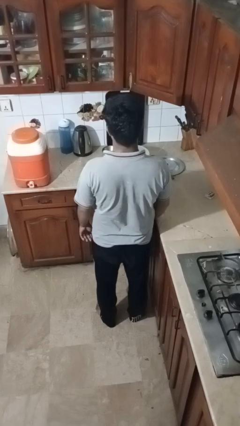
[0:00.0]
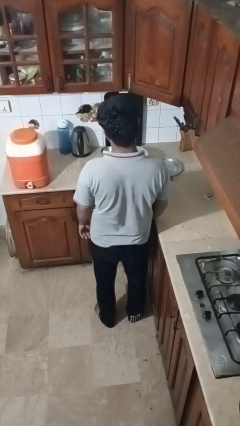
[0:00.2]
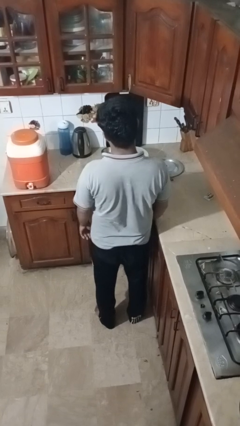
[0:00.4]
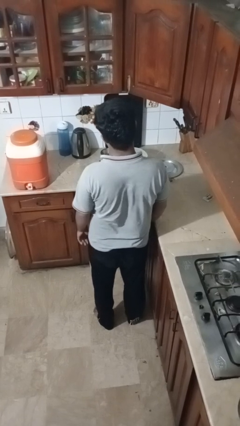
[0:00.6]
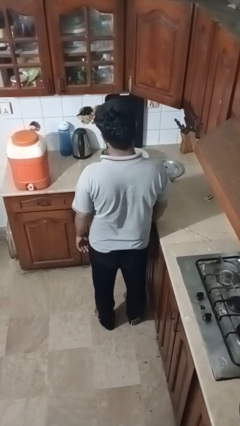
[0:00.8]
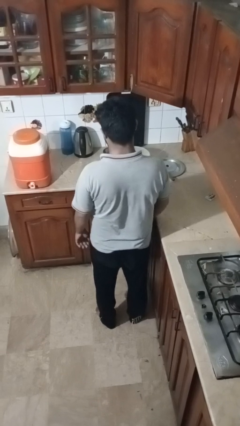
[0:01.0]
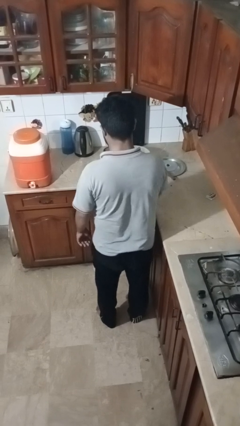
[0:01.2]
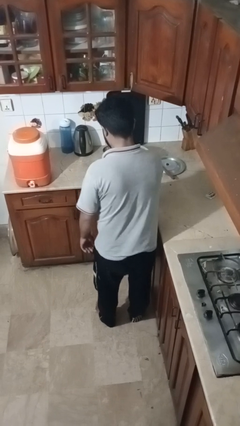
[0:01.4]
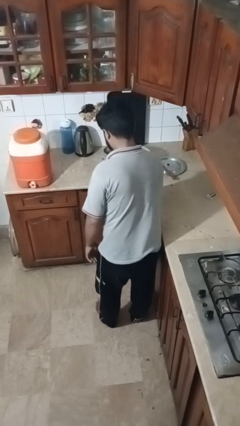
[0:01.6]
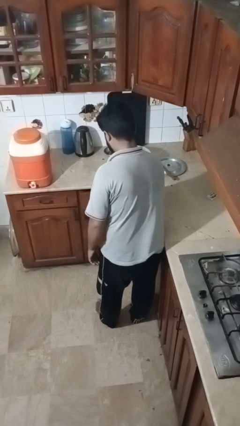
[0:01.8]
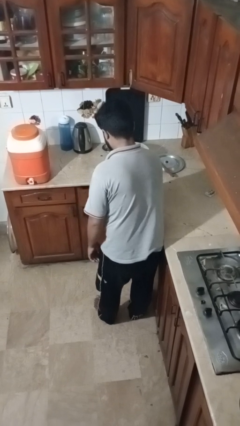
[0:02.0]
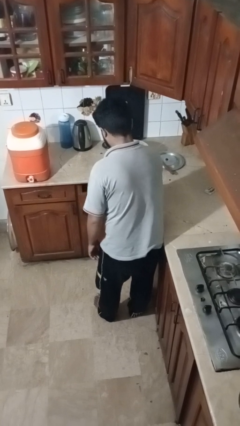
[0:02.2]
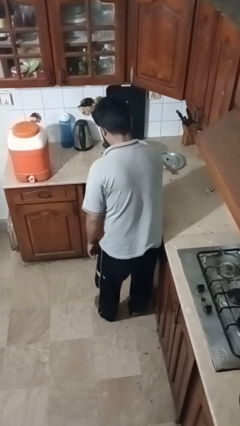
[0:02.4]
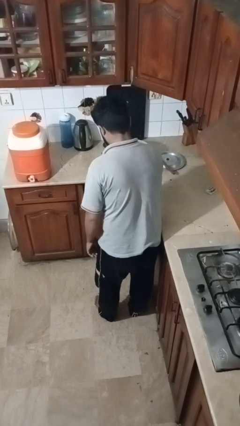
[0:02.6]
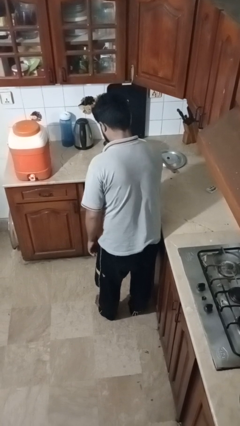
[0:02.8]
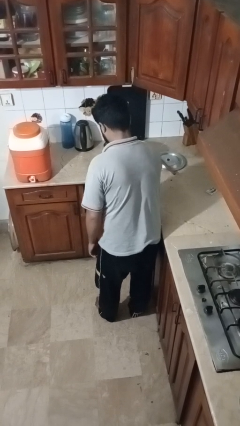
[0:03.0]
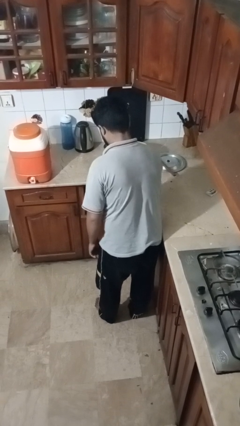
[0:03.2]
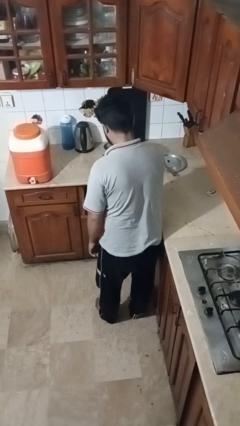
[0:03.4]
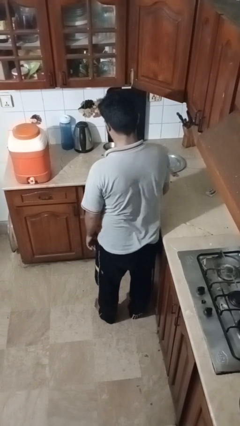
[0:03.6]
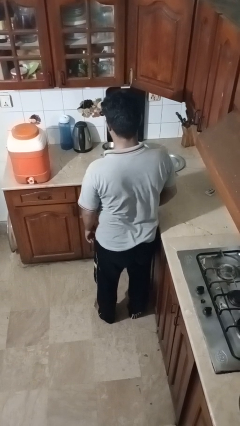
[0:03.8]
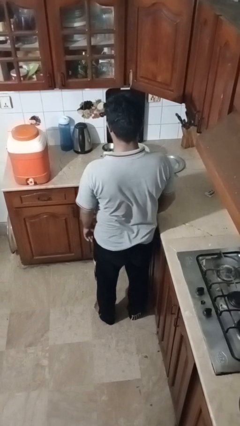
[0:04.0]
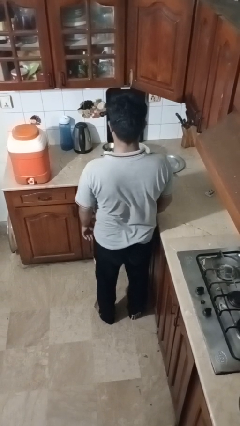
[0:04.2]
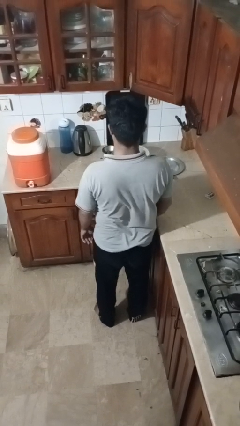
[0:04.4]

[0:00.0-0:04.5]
person opens kitchen drawer

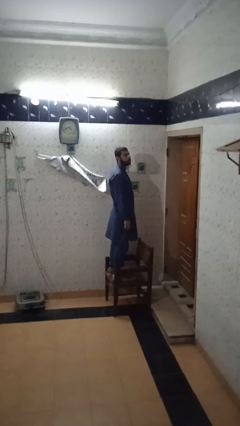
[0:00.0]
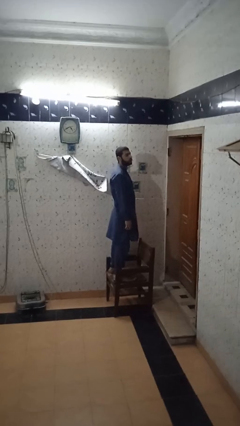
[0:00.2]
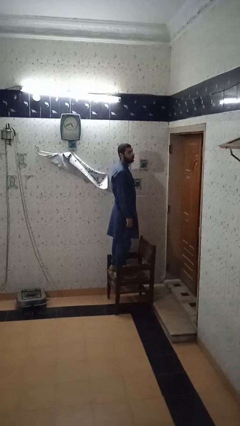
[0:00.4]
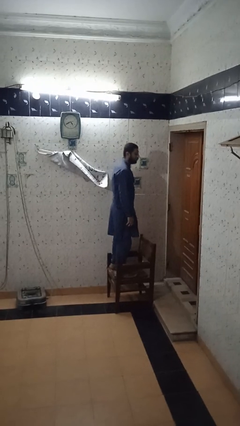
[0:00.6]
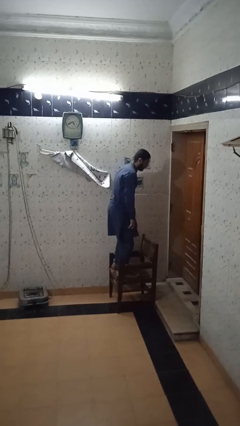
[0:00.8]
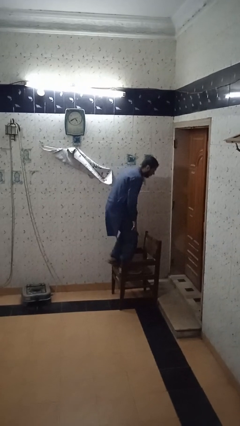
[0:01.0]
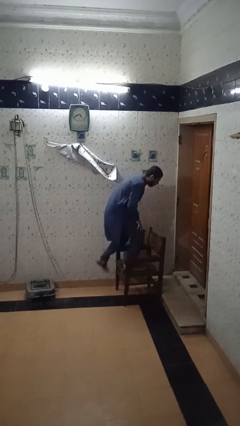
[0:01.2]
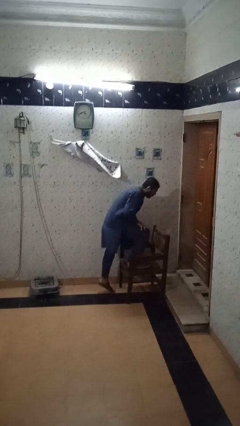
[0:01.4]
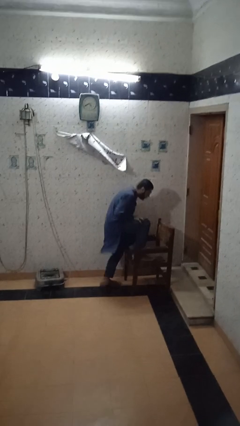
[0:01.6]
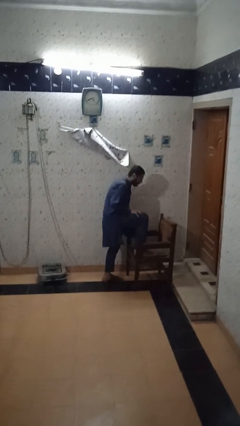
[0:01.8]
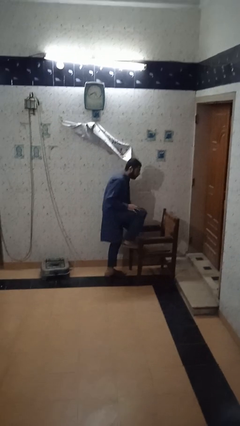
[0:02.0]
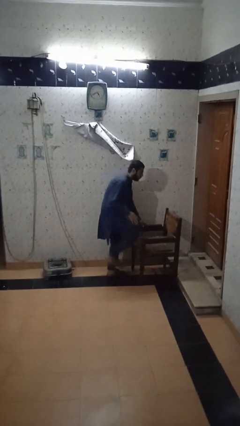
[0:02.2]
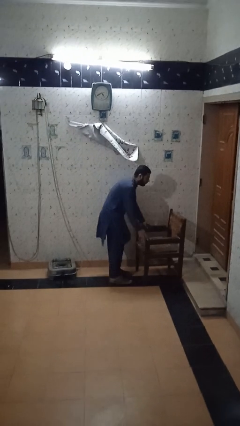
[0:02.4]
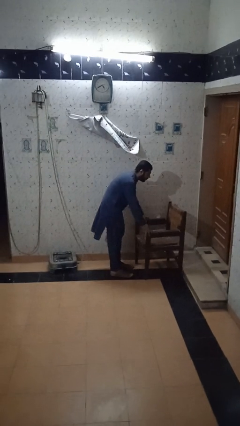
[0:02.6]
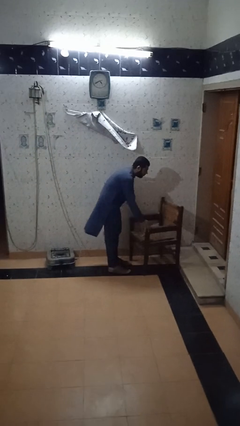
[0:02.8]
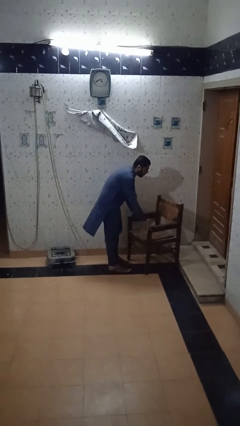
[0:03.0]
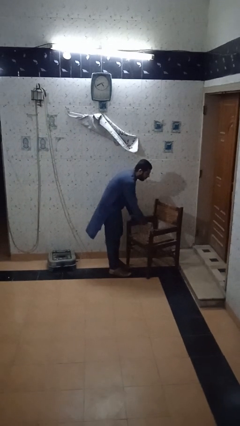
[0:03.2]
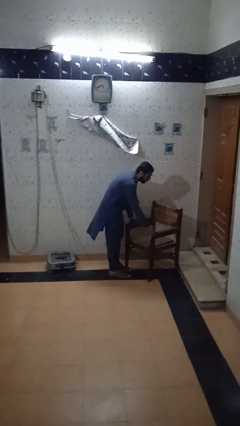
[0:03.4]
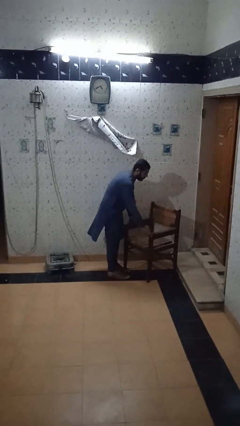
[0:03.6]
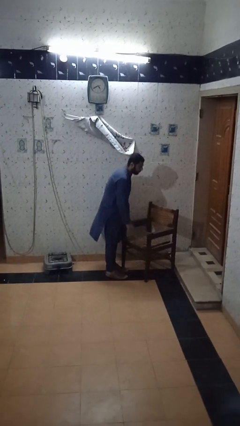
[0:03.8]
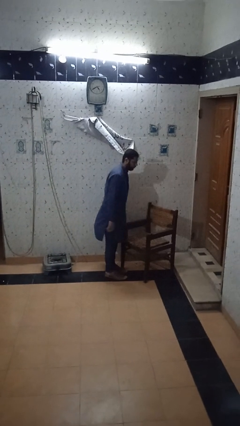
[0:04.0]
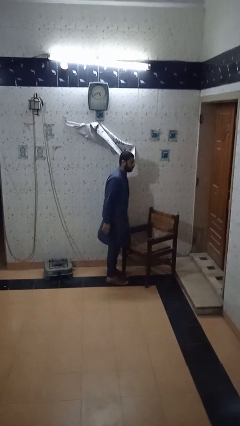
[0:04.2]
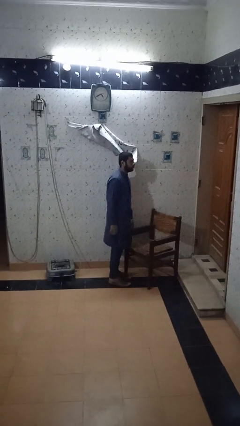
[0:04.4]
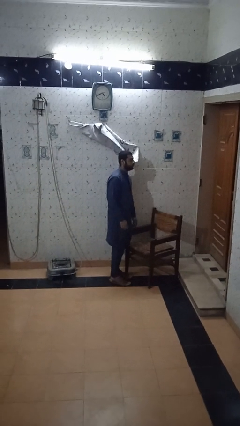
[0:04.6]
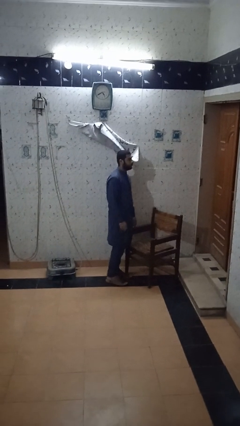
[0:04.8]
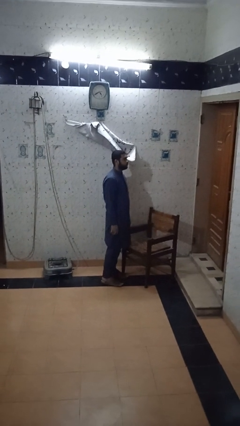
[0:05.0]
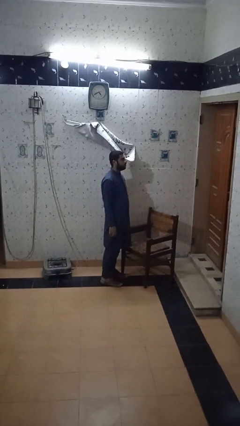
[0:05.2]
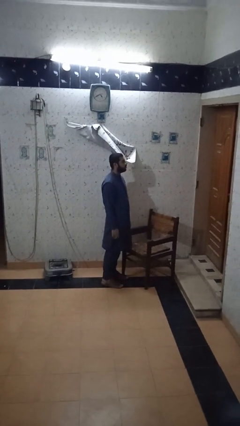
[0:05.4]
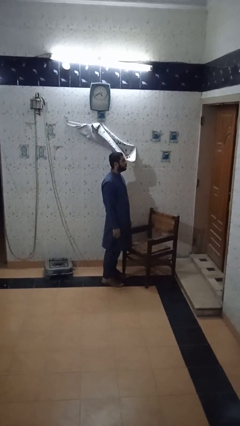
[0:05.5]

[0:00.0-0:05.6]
person climbs off chair

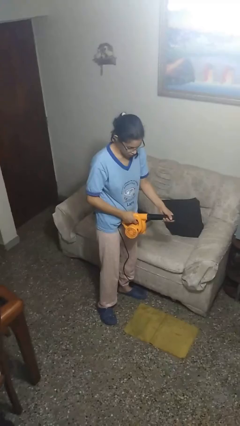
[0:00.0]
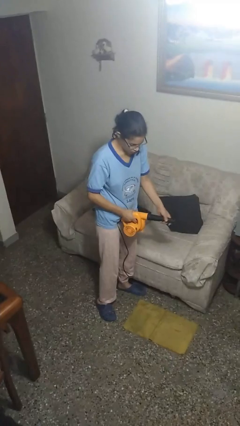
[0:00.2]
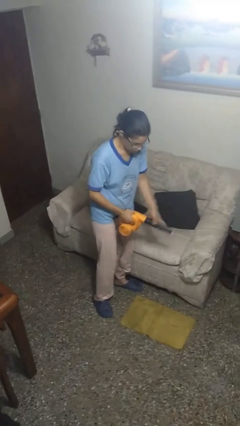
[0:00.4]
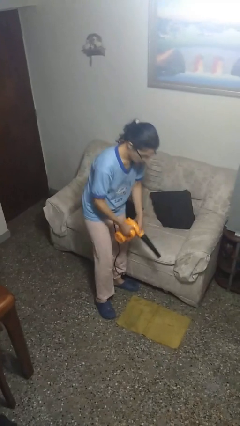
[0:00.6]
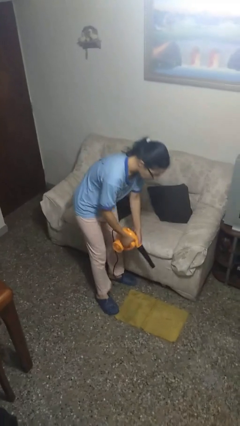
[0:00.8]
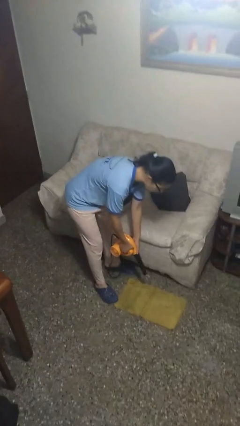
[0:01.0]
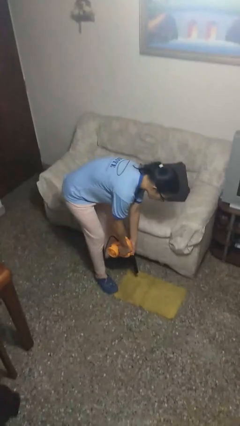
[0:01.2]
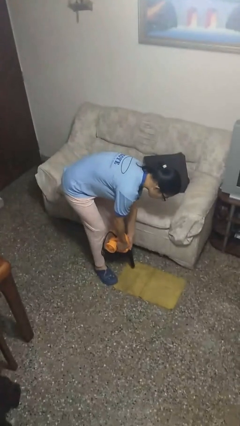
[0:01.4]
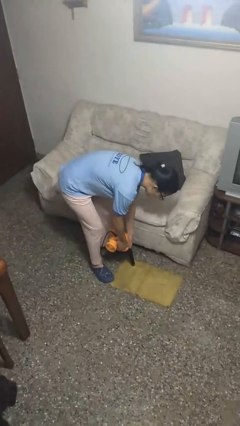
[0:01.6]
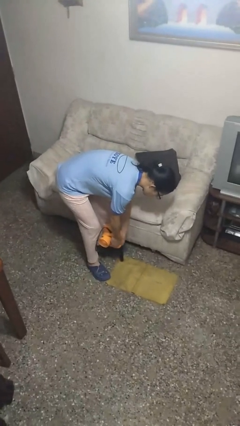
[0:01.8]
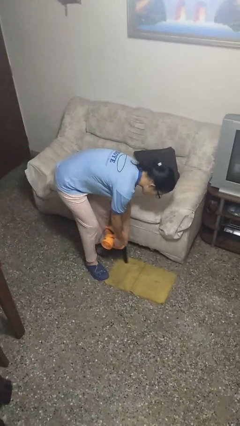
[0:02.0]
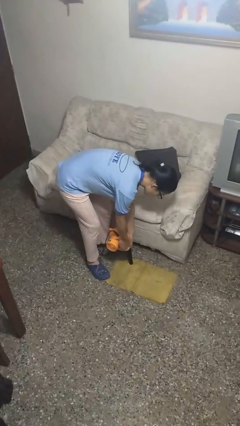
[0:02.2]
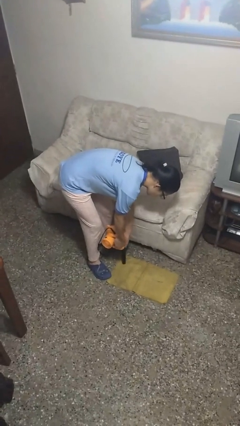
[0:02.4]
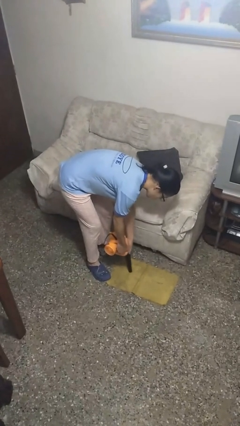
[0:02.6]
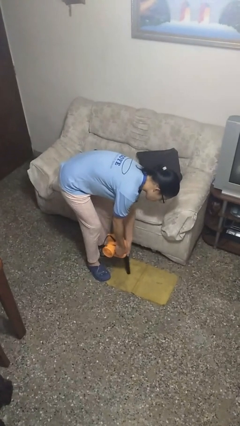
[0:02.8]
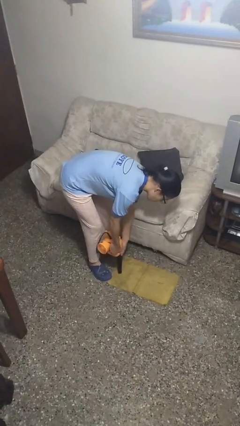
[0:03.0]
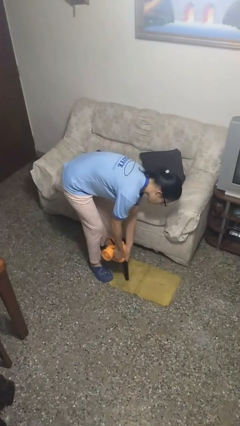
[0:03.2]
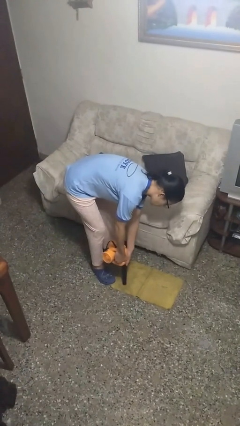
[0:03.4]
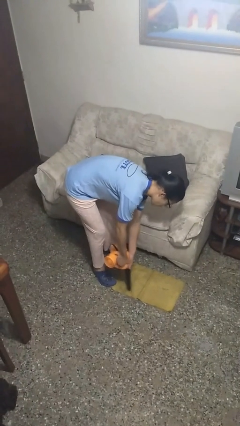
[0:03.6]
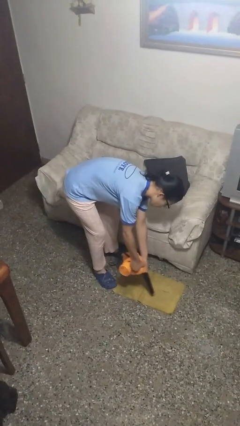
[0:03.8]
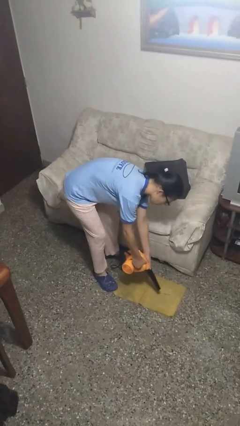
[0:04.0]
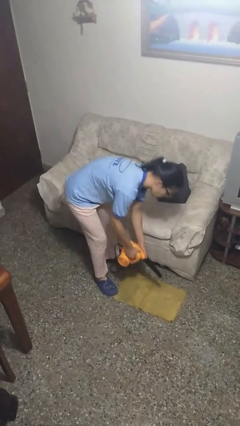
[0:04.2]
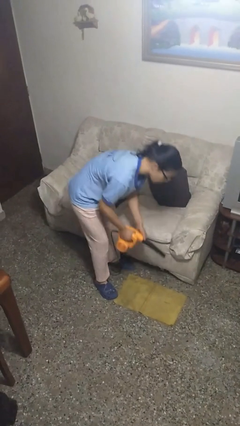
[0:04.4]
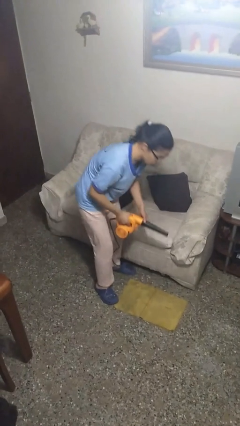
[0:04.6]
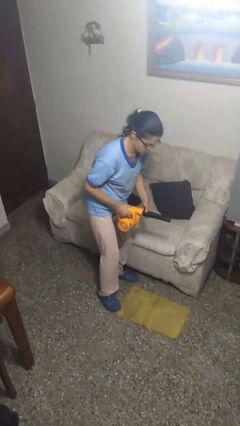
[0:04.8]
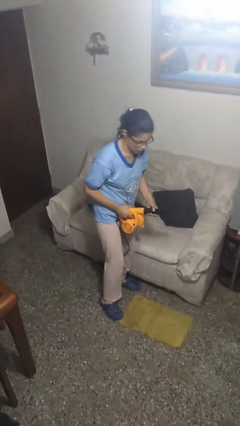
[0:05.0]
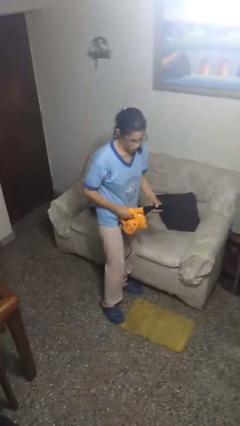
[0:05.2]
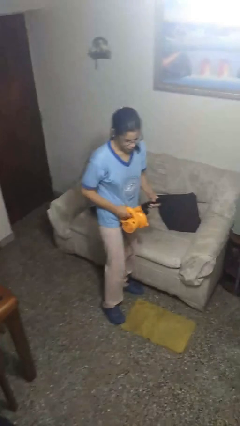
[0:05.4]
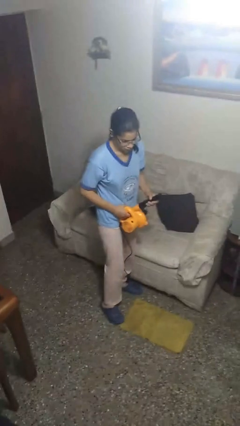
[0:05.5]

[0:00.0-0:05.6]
person vacuums carpet

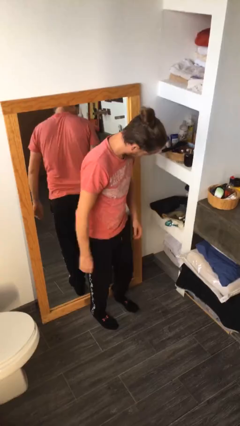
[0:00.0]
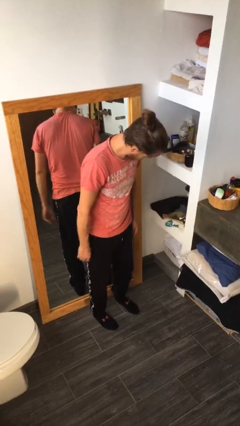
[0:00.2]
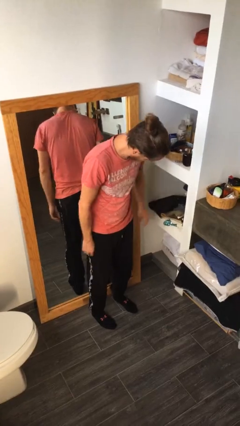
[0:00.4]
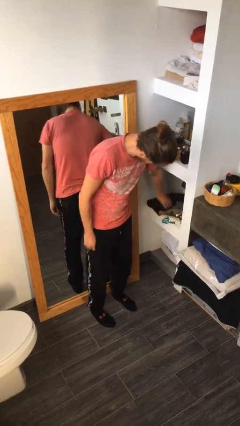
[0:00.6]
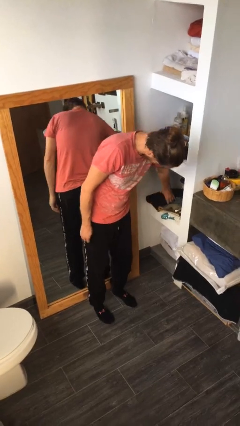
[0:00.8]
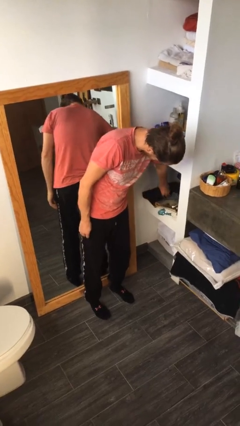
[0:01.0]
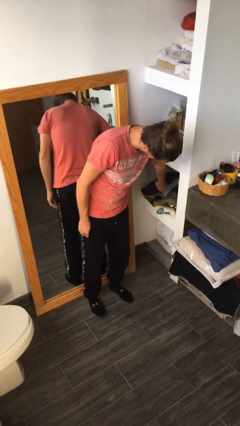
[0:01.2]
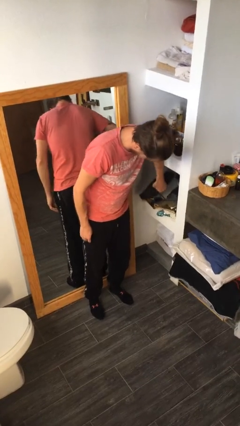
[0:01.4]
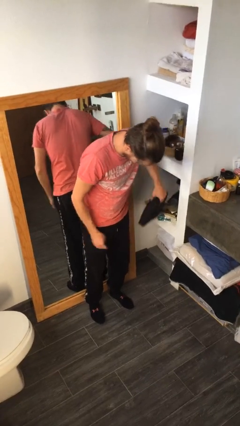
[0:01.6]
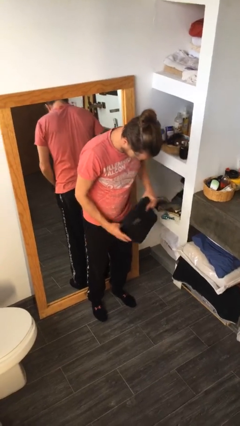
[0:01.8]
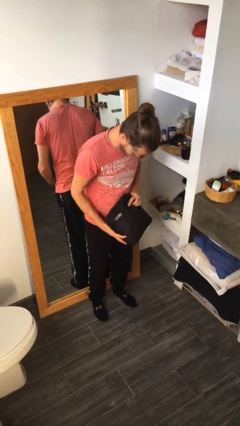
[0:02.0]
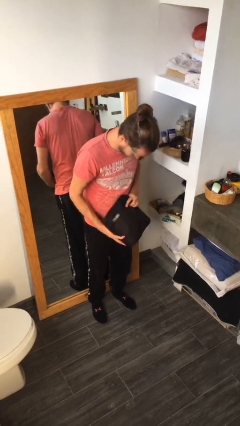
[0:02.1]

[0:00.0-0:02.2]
person picks up object from cabinet
